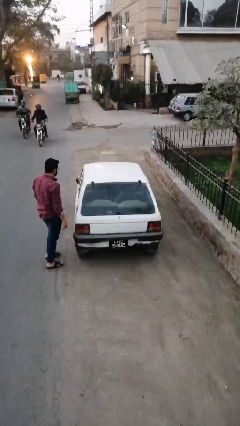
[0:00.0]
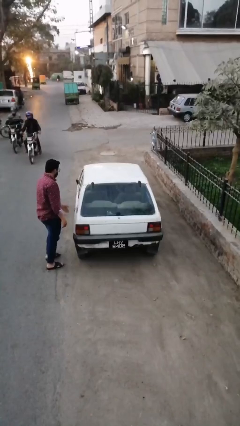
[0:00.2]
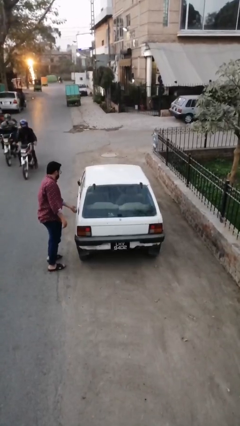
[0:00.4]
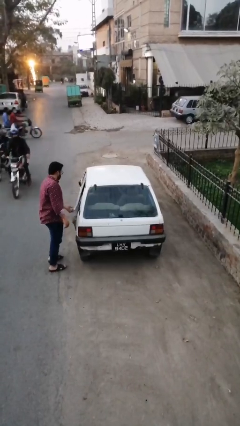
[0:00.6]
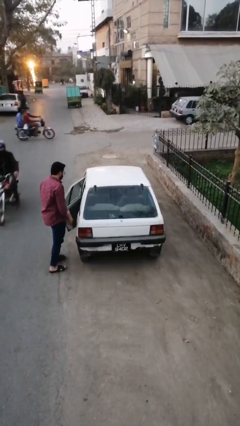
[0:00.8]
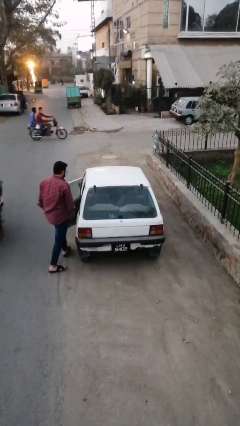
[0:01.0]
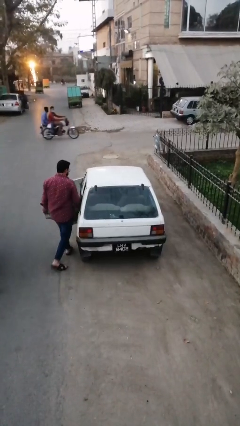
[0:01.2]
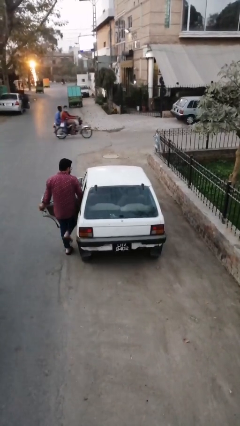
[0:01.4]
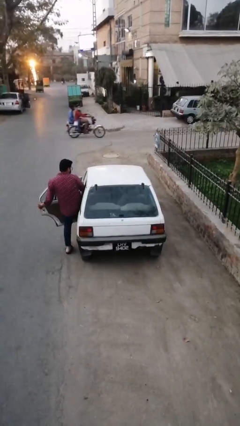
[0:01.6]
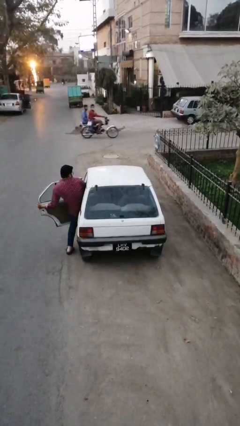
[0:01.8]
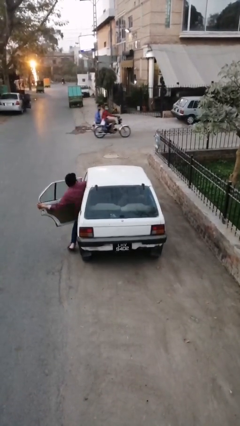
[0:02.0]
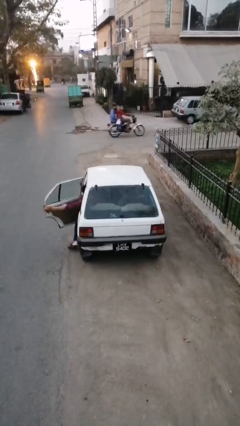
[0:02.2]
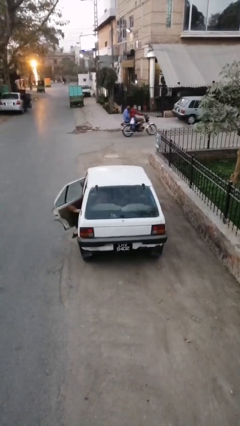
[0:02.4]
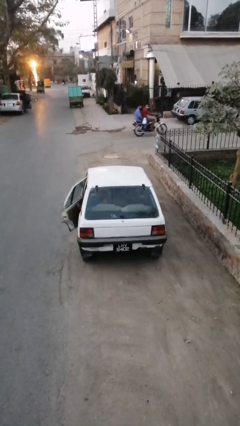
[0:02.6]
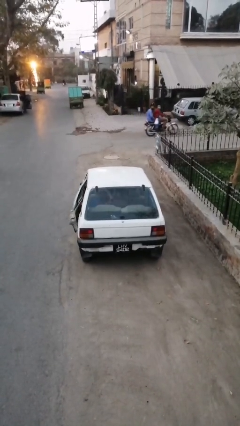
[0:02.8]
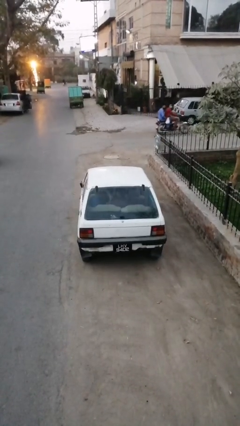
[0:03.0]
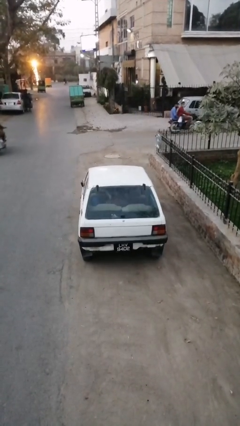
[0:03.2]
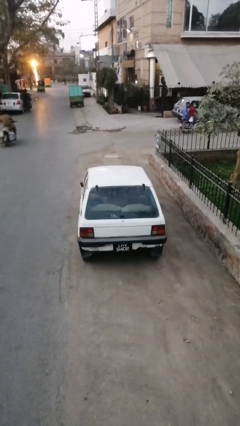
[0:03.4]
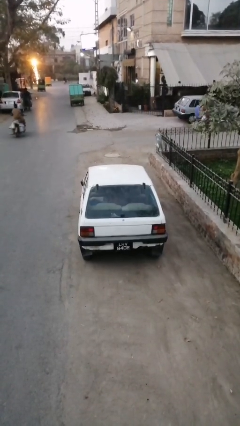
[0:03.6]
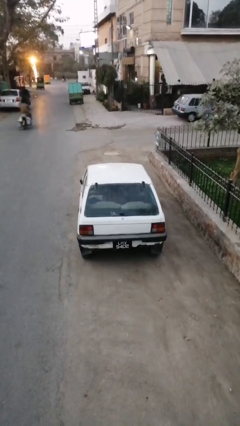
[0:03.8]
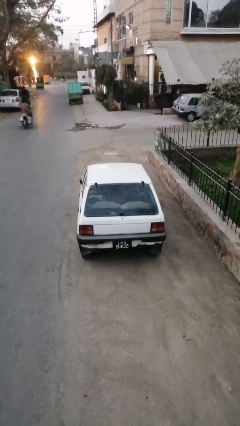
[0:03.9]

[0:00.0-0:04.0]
car picks up person

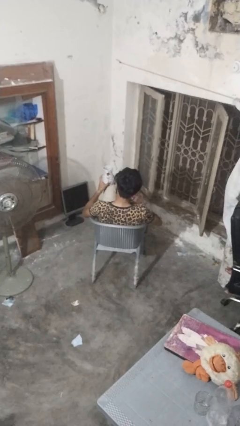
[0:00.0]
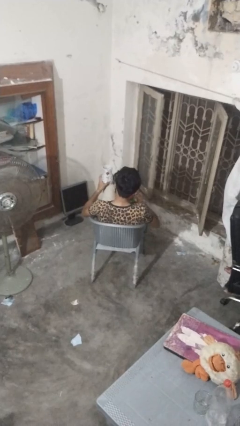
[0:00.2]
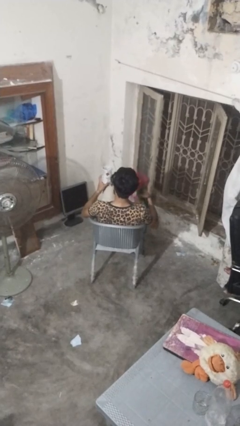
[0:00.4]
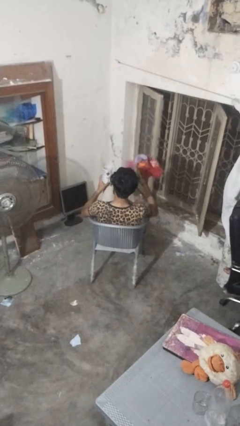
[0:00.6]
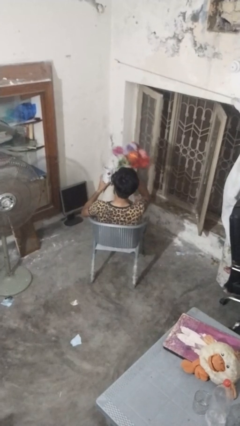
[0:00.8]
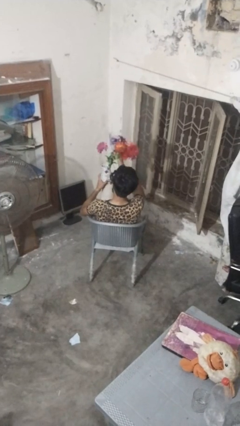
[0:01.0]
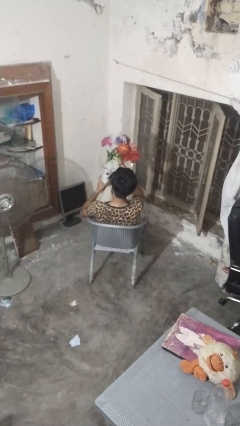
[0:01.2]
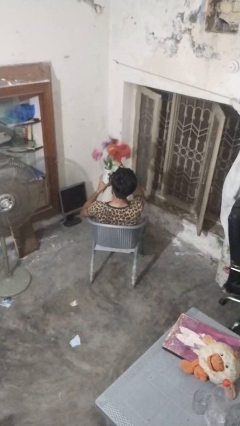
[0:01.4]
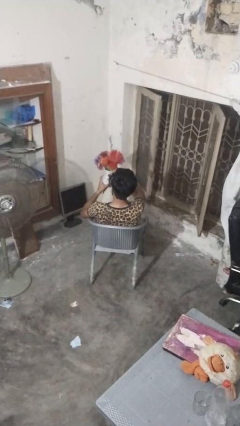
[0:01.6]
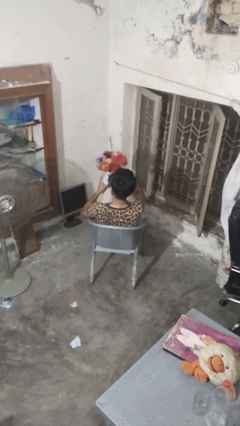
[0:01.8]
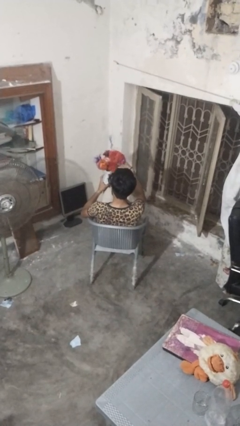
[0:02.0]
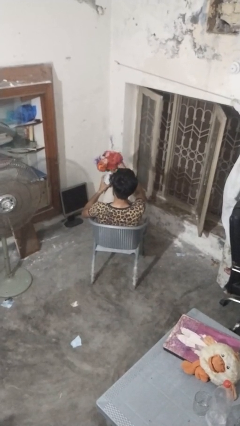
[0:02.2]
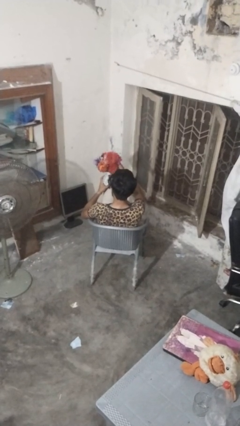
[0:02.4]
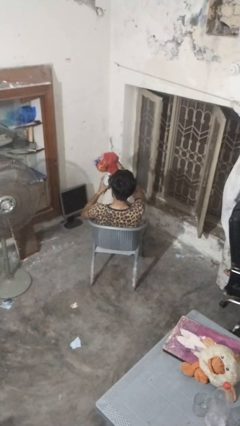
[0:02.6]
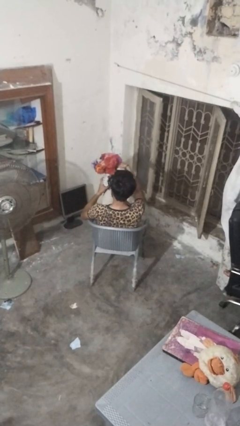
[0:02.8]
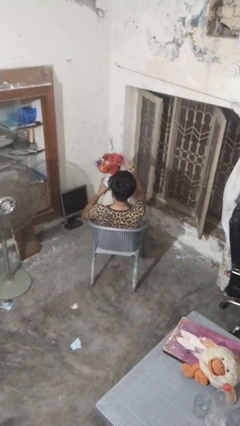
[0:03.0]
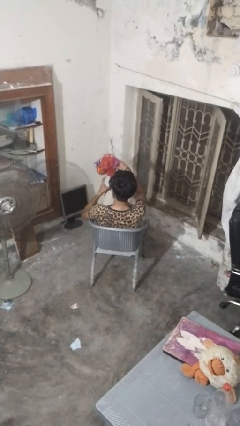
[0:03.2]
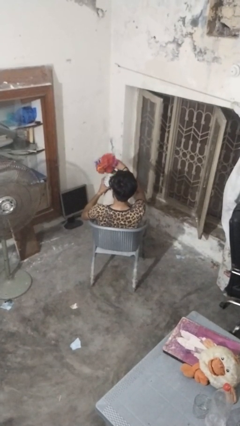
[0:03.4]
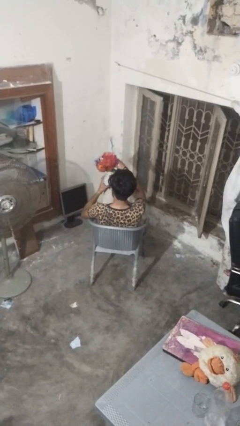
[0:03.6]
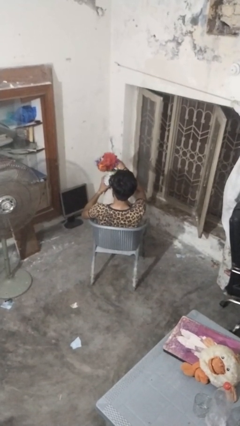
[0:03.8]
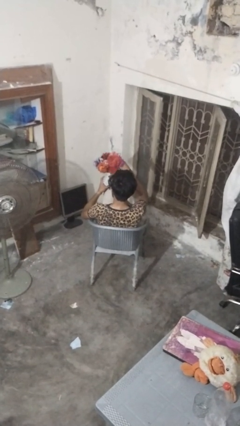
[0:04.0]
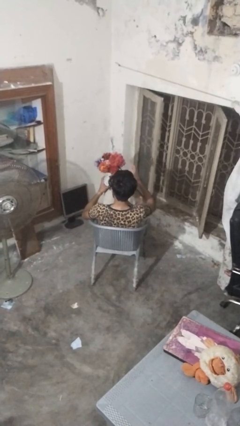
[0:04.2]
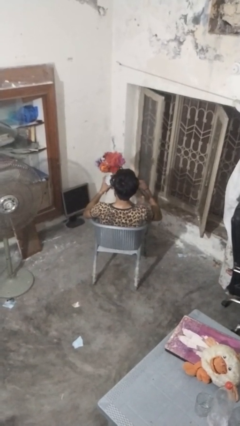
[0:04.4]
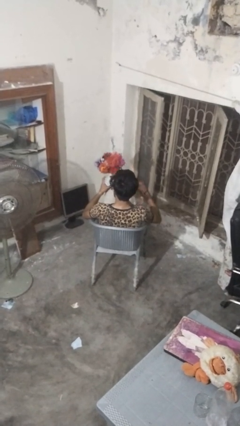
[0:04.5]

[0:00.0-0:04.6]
person arranges flowers in vase

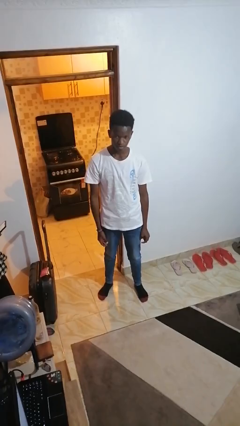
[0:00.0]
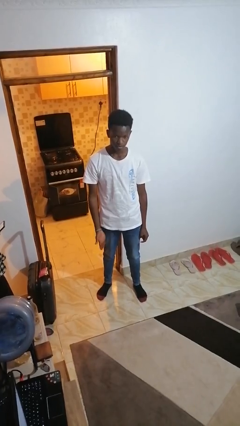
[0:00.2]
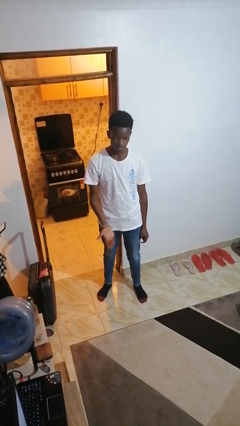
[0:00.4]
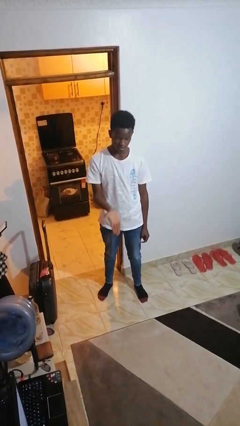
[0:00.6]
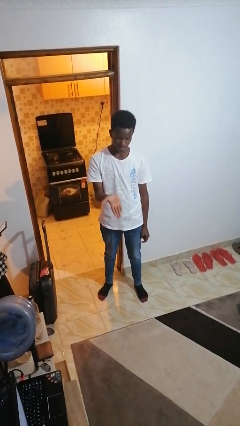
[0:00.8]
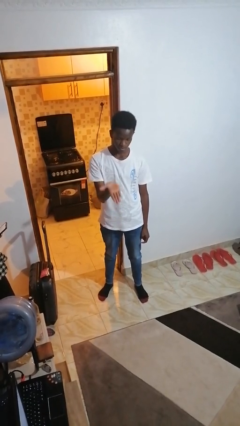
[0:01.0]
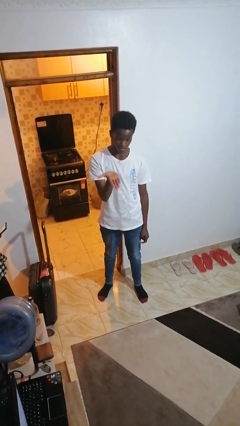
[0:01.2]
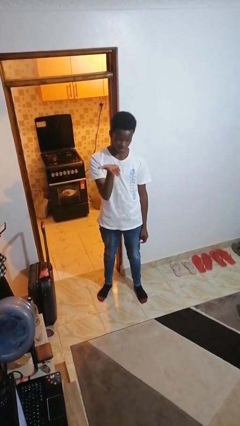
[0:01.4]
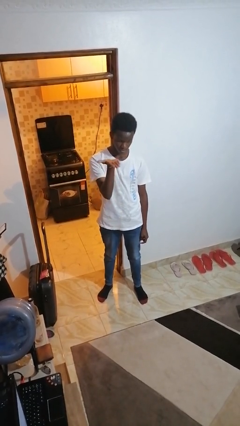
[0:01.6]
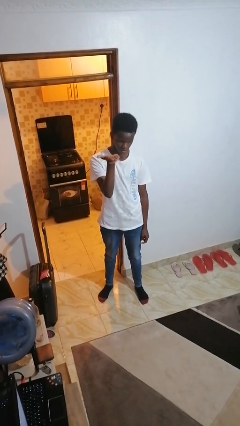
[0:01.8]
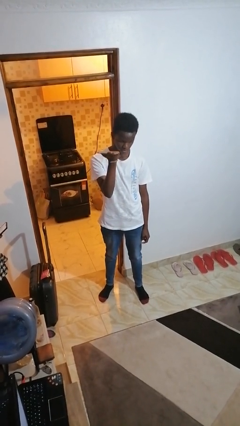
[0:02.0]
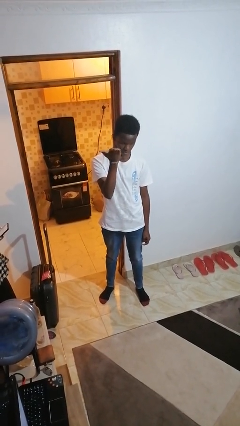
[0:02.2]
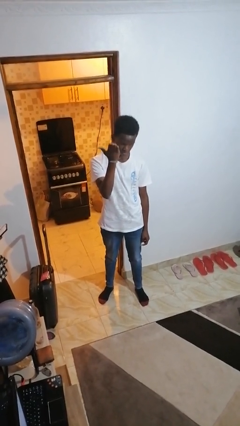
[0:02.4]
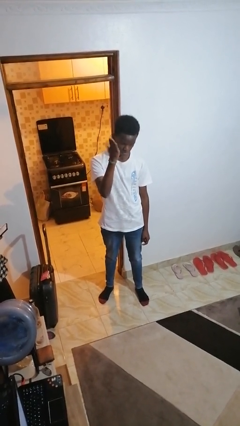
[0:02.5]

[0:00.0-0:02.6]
person gestures swipe up

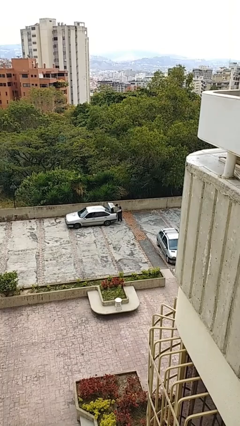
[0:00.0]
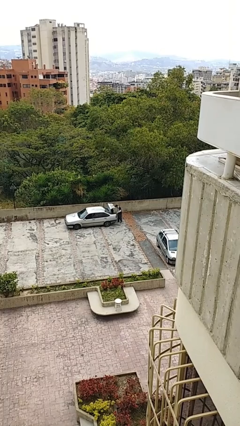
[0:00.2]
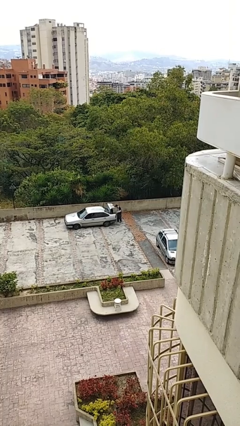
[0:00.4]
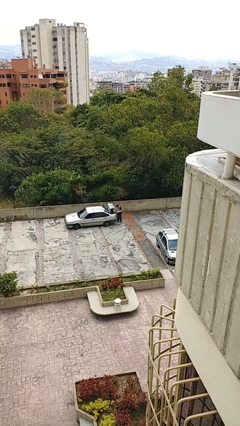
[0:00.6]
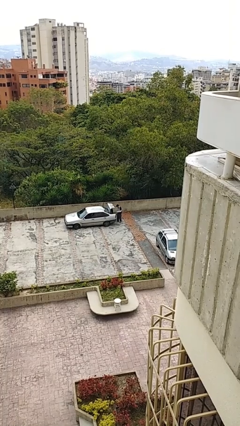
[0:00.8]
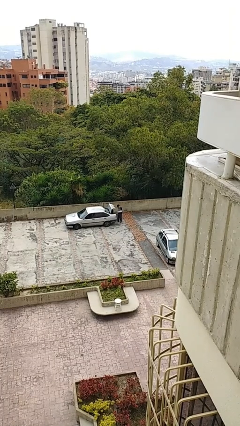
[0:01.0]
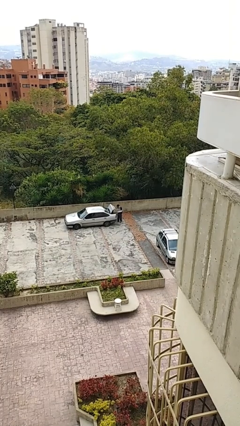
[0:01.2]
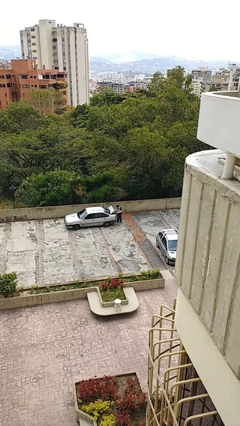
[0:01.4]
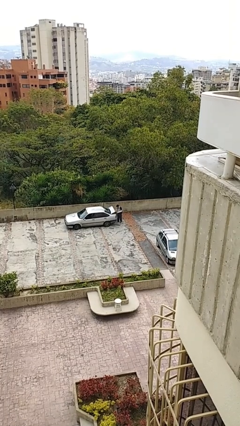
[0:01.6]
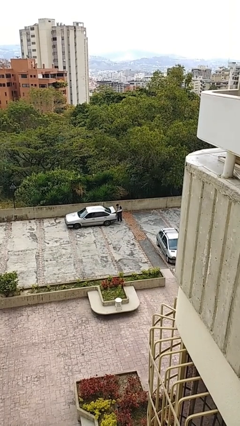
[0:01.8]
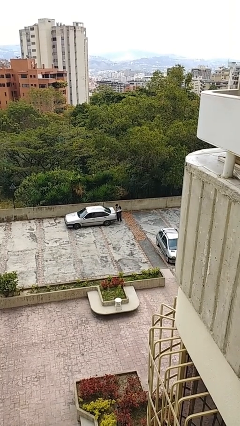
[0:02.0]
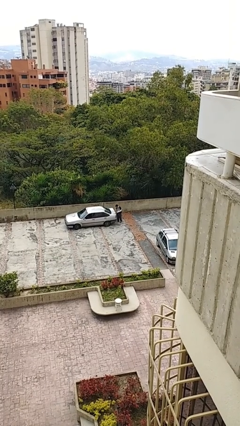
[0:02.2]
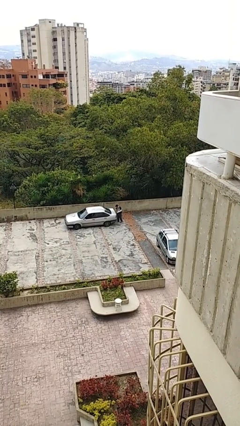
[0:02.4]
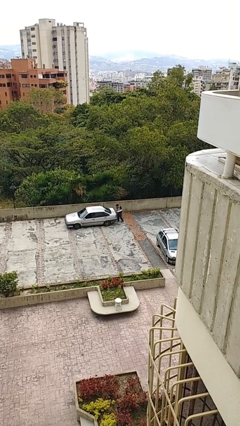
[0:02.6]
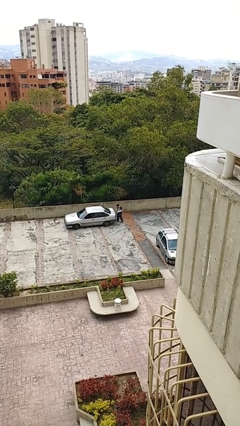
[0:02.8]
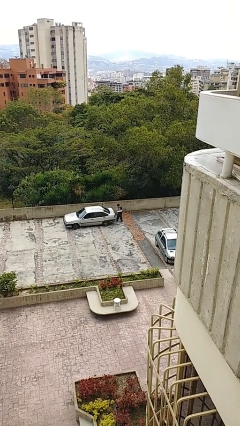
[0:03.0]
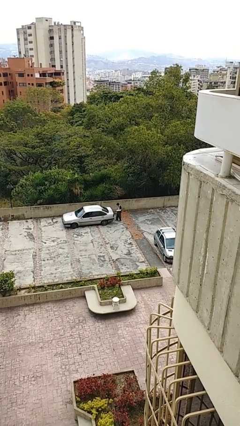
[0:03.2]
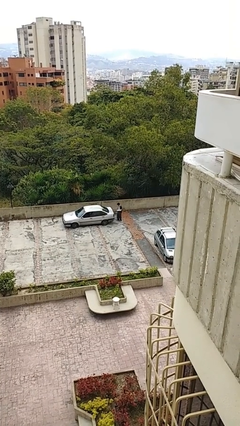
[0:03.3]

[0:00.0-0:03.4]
person closes car trunk

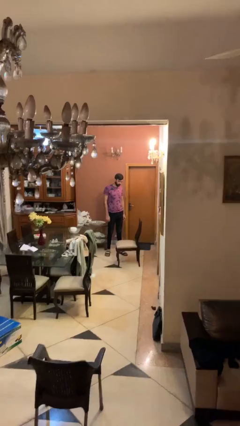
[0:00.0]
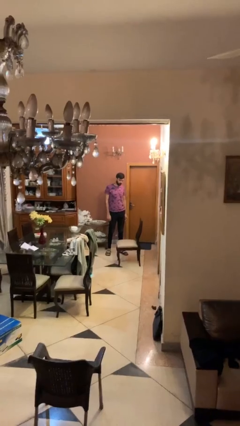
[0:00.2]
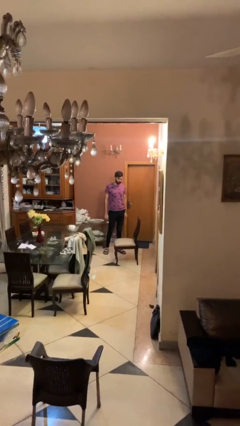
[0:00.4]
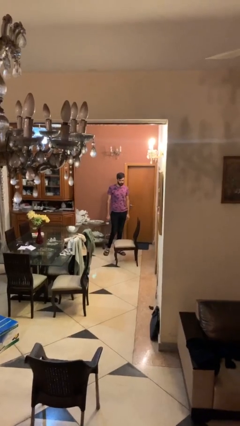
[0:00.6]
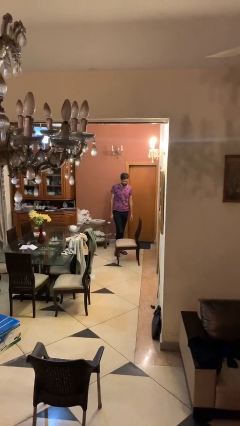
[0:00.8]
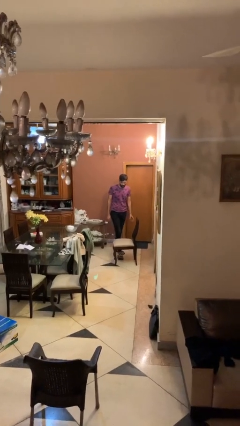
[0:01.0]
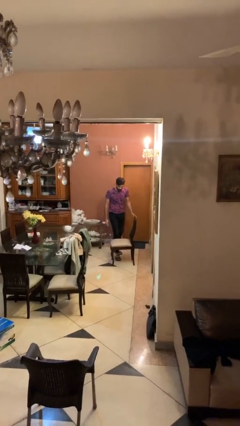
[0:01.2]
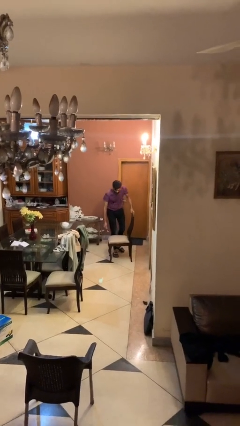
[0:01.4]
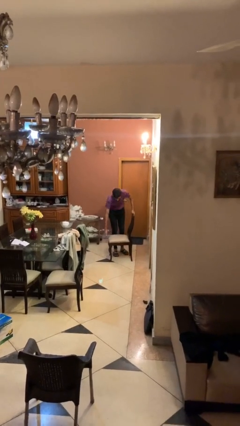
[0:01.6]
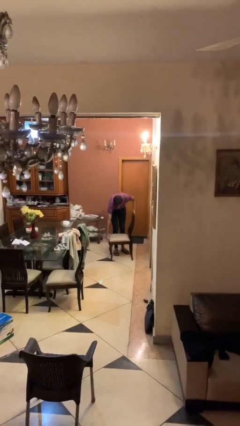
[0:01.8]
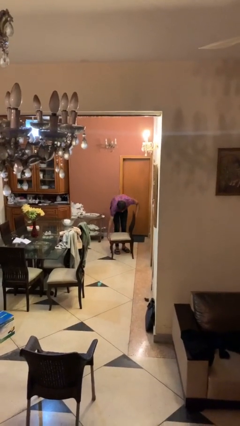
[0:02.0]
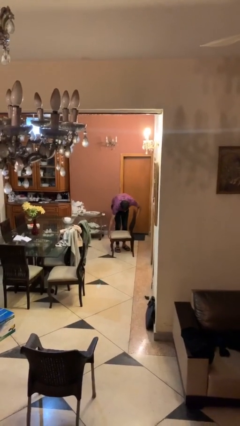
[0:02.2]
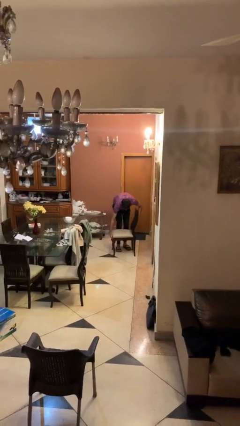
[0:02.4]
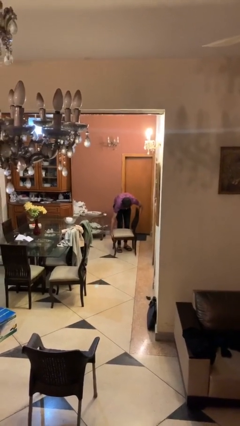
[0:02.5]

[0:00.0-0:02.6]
person picks up object from floor

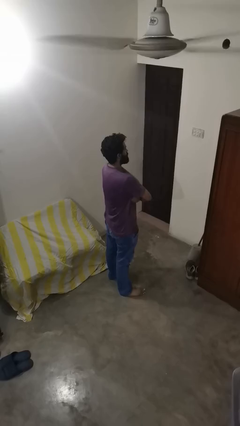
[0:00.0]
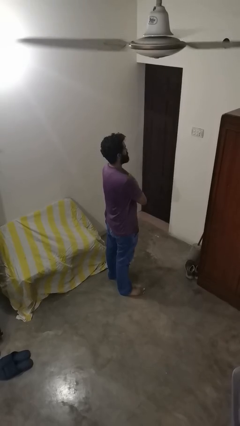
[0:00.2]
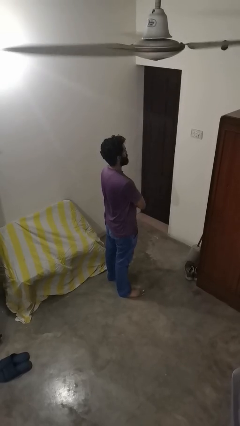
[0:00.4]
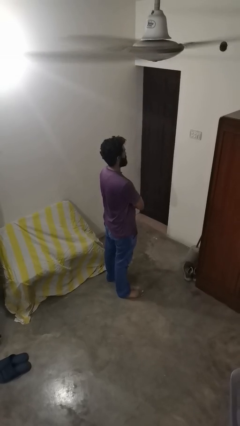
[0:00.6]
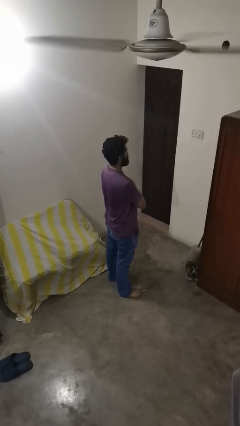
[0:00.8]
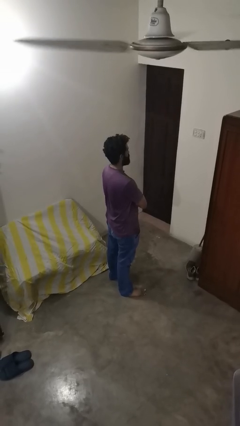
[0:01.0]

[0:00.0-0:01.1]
person crosses arms
